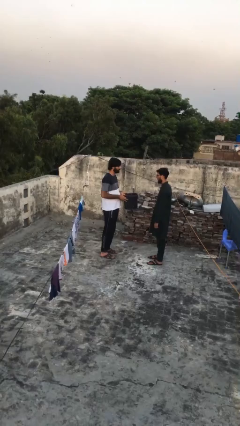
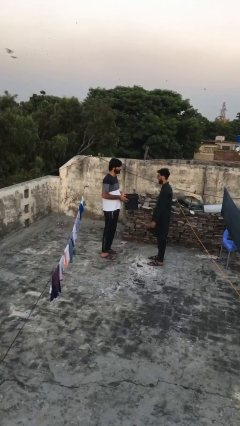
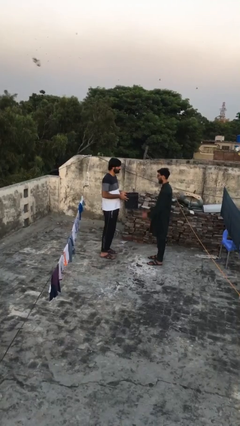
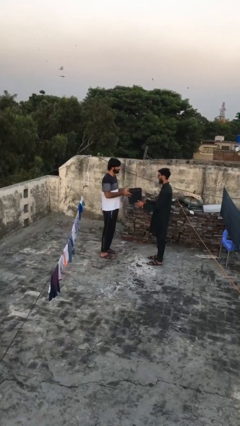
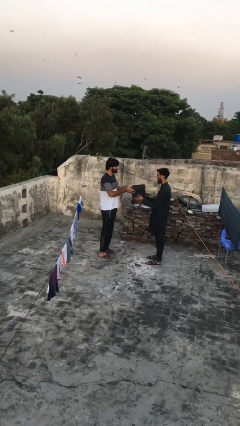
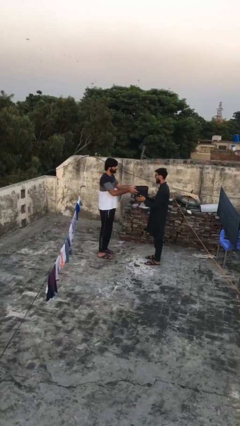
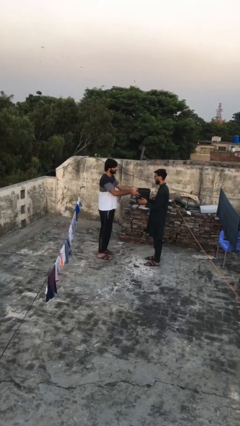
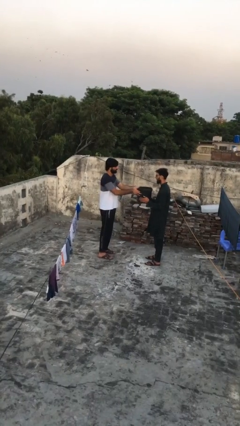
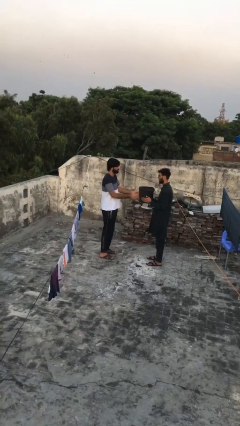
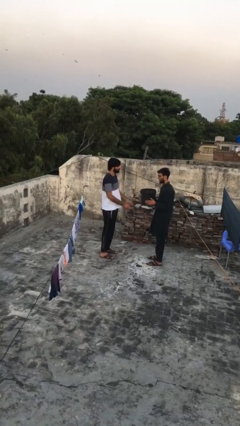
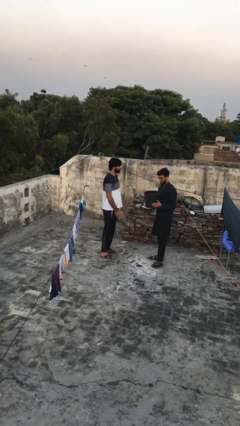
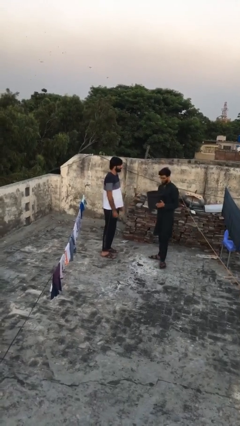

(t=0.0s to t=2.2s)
person transfers object to person

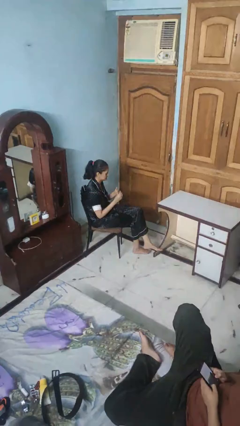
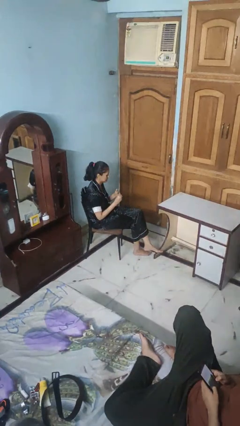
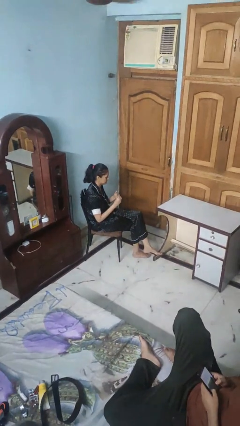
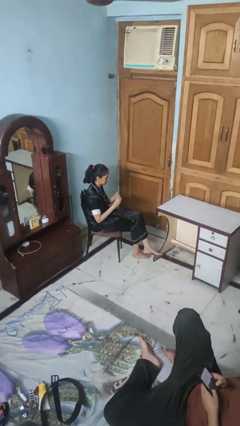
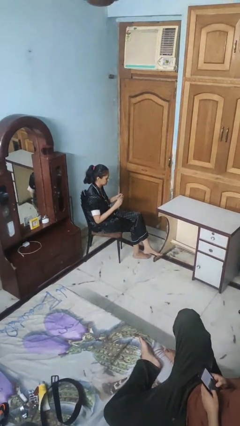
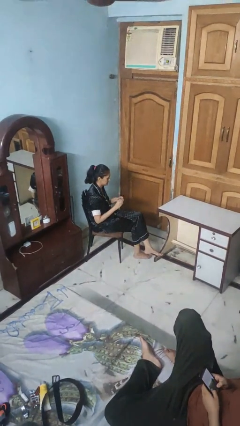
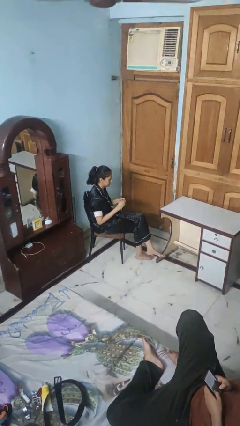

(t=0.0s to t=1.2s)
person takes off ring

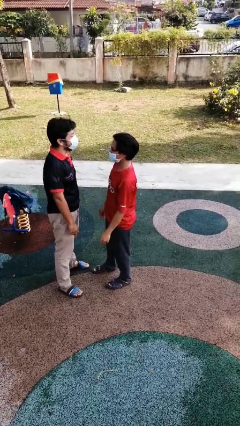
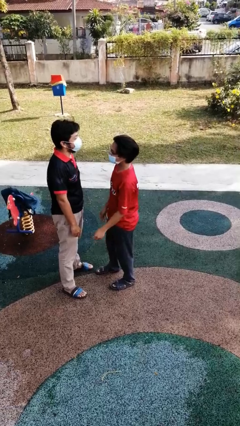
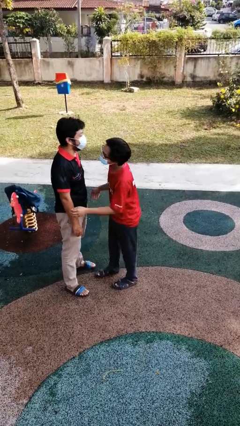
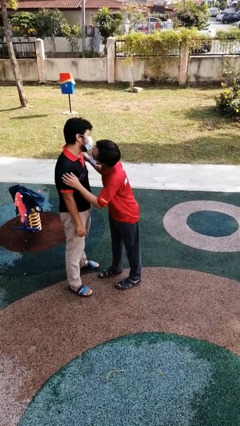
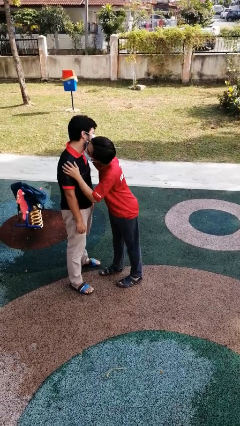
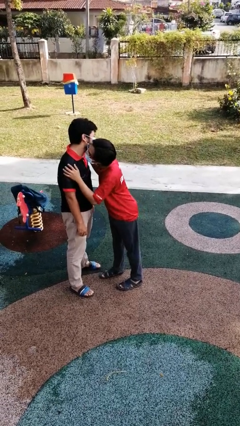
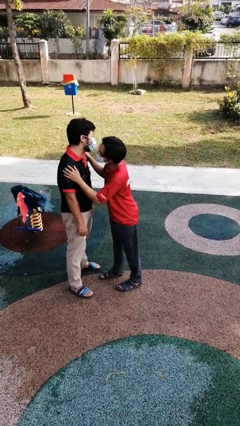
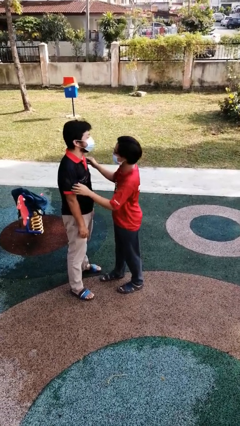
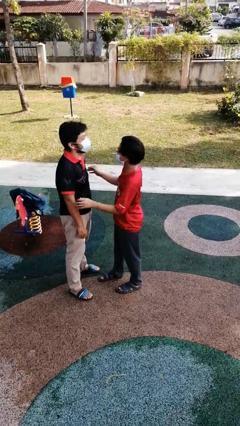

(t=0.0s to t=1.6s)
person kisses cheek of person

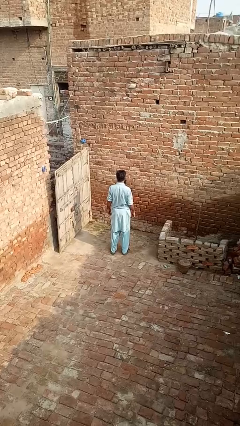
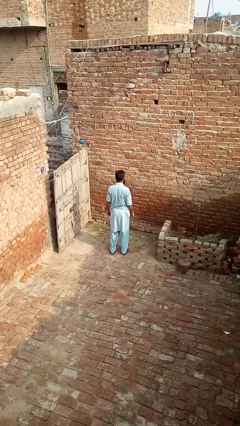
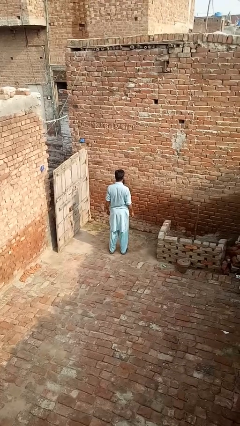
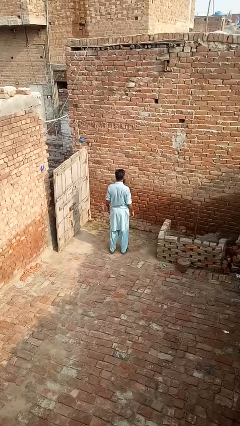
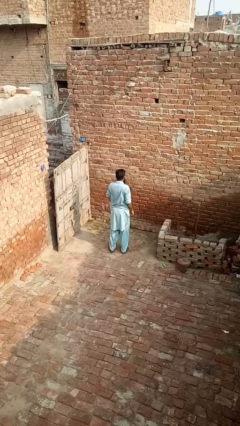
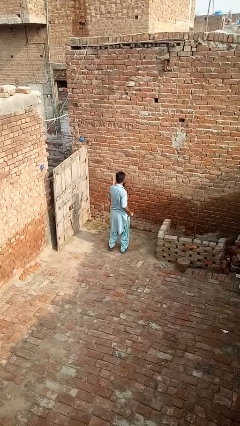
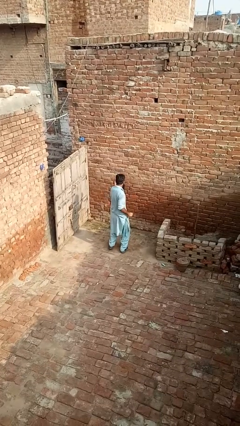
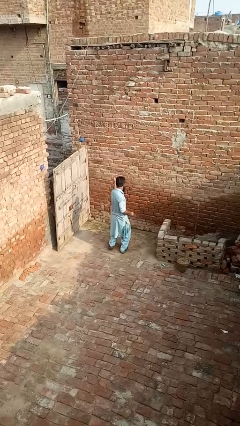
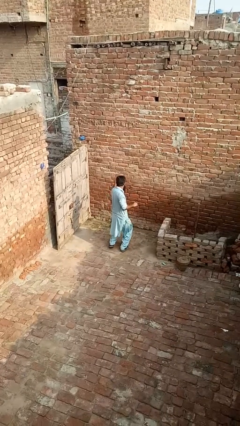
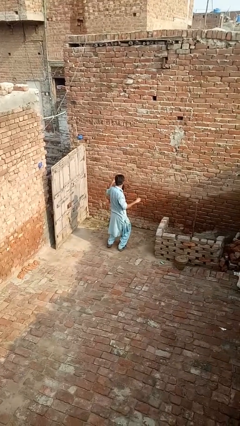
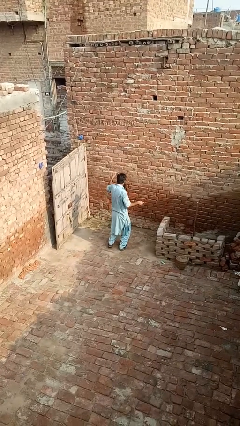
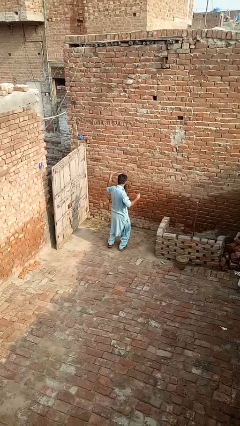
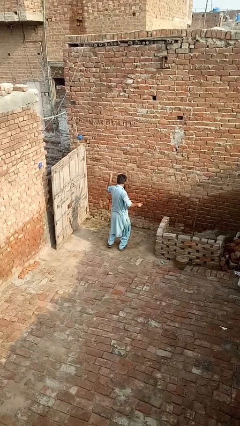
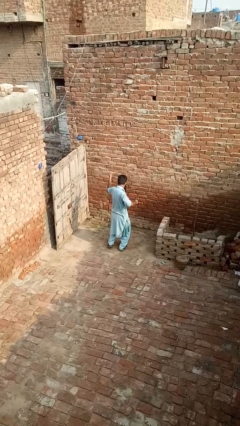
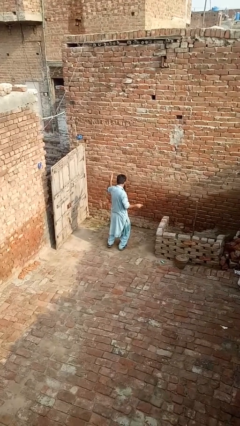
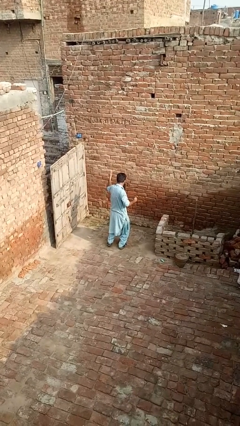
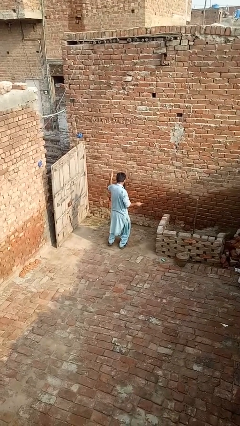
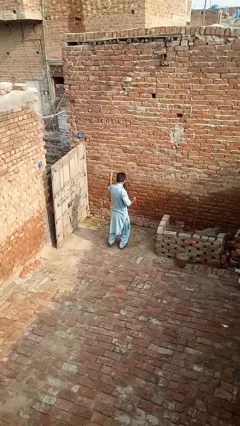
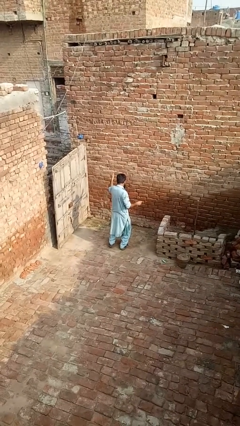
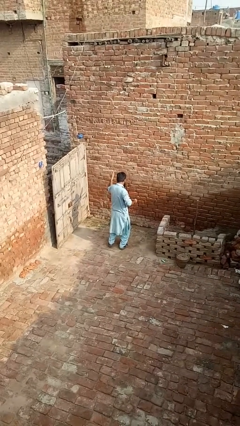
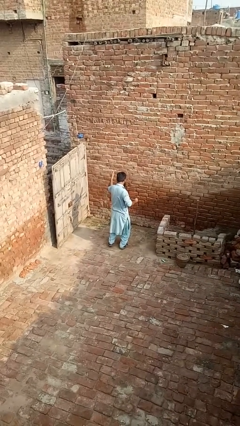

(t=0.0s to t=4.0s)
person dances in place

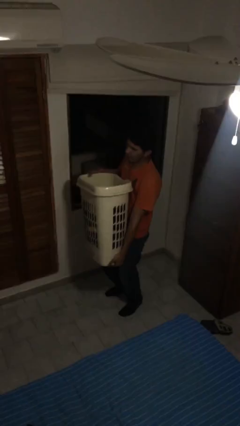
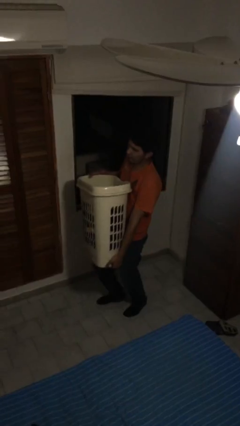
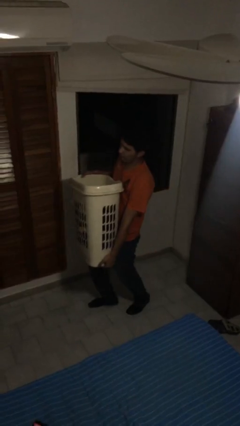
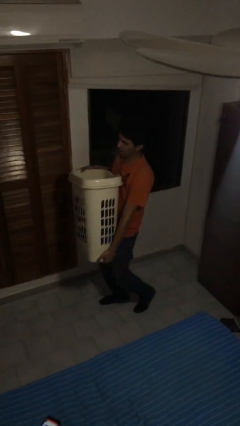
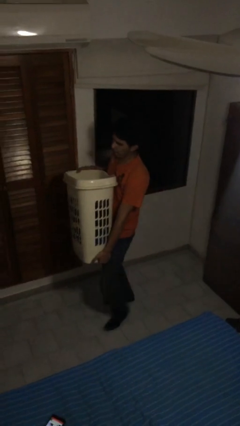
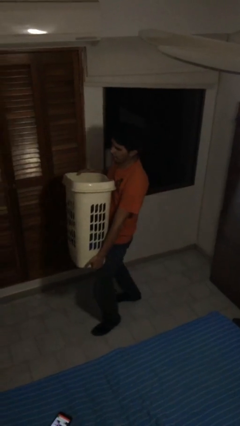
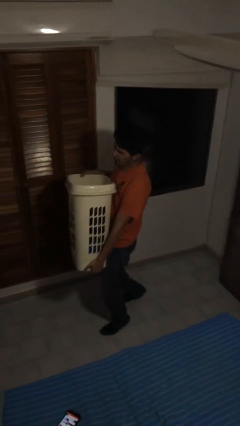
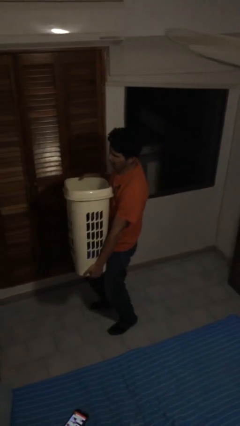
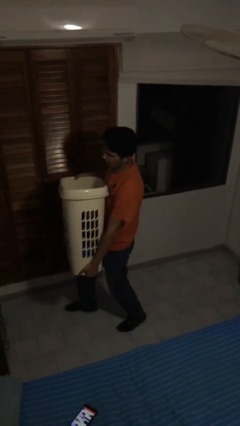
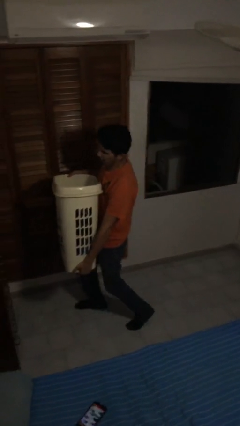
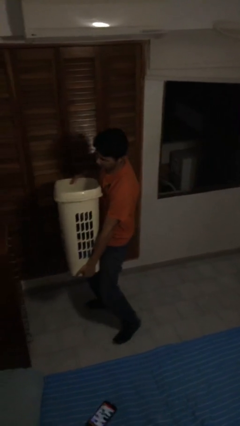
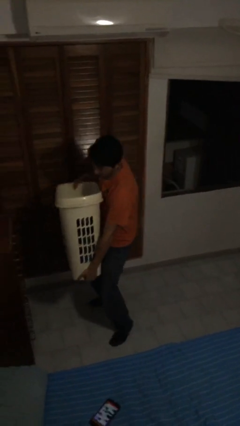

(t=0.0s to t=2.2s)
person carries heavy object

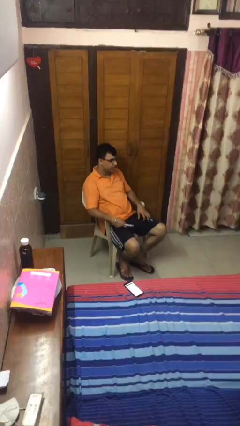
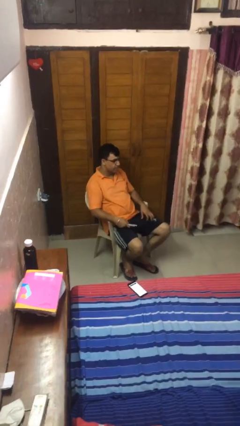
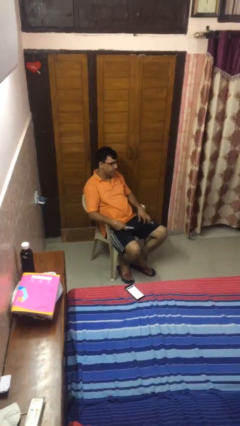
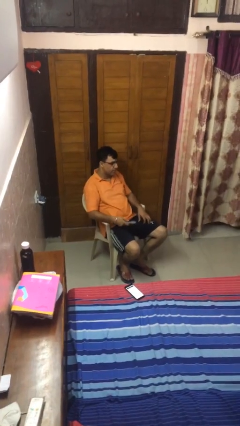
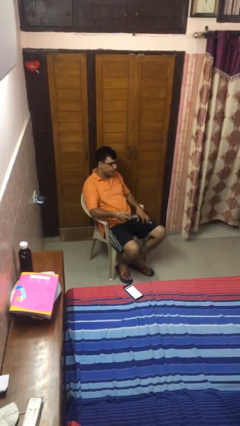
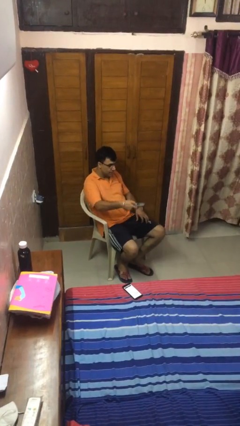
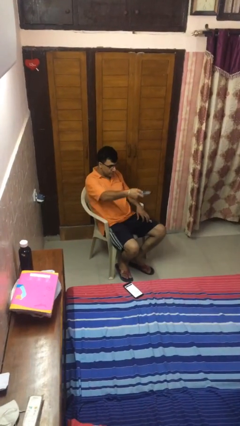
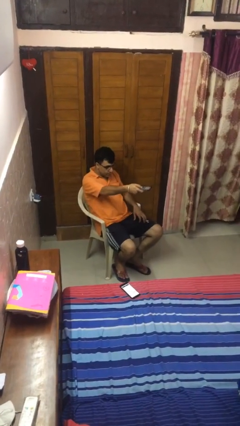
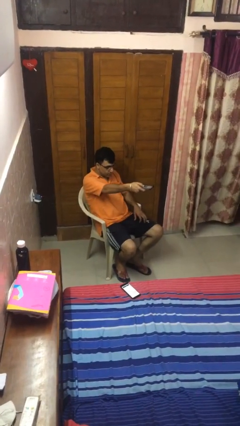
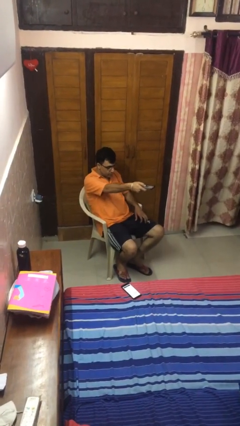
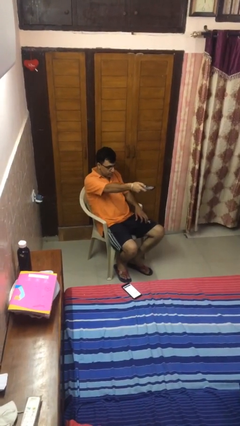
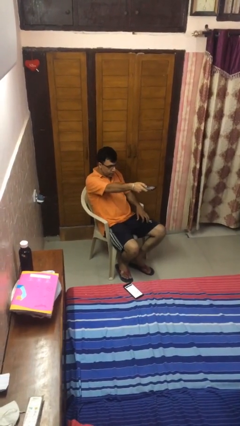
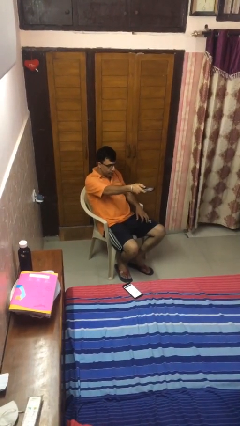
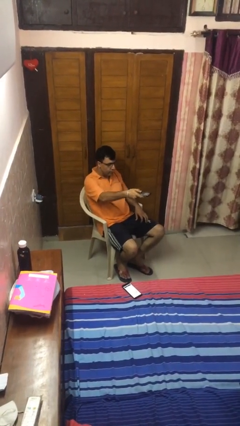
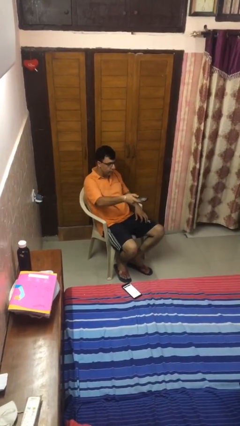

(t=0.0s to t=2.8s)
person uses television remote

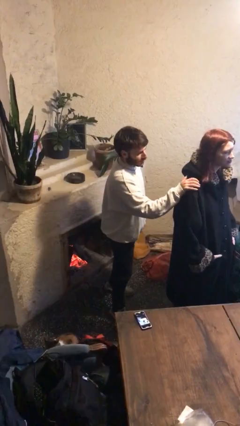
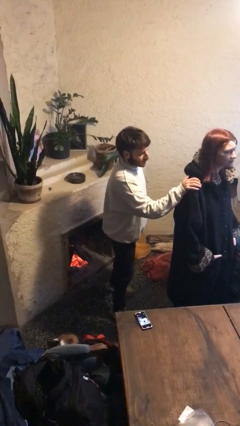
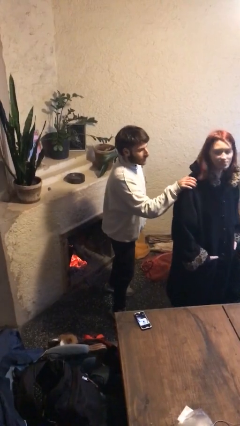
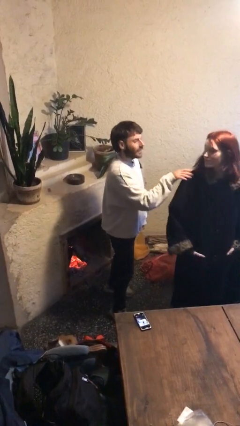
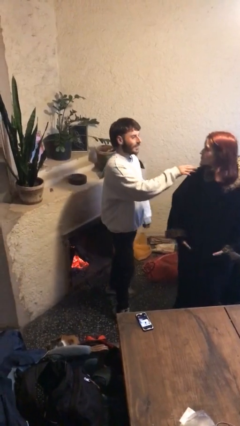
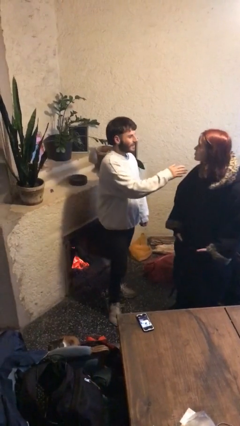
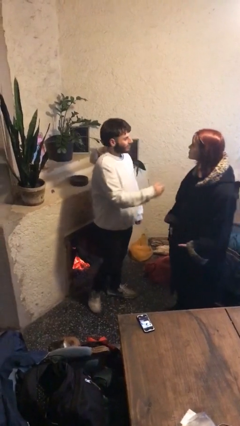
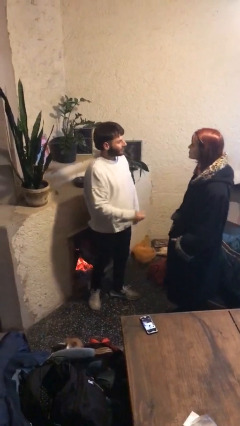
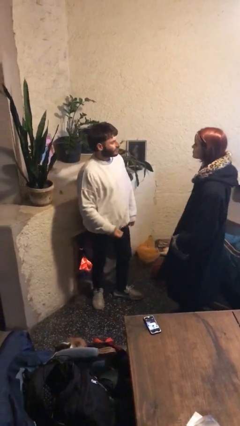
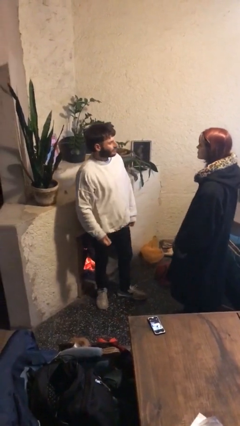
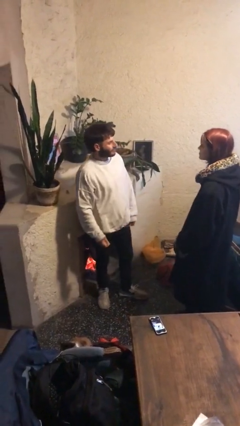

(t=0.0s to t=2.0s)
person spins person around

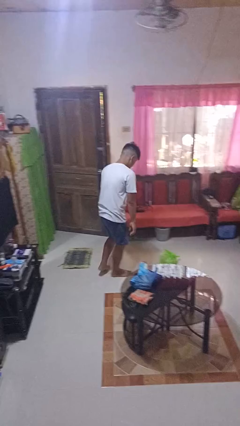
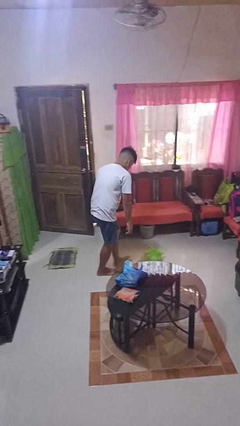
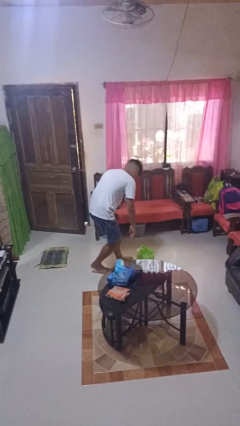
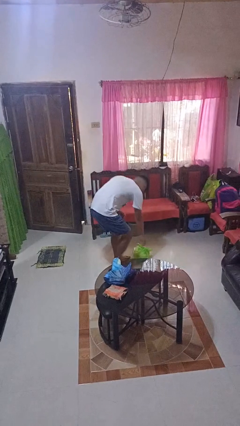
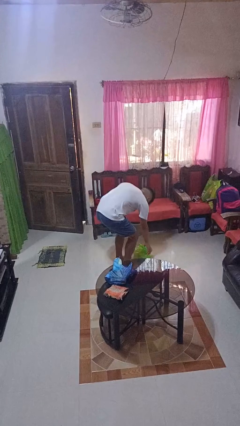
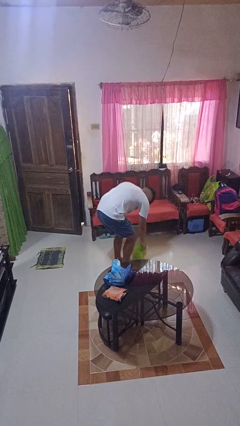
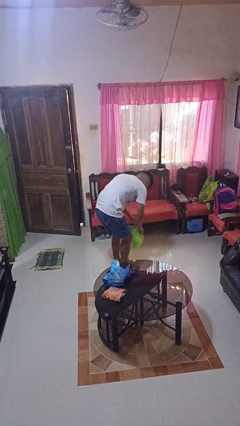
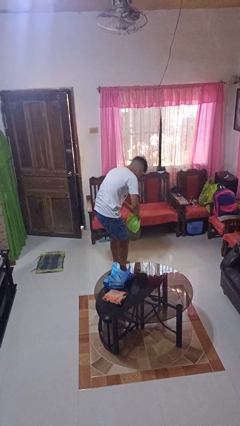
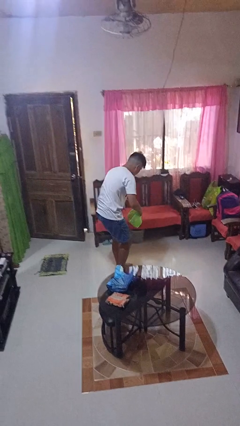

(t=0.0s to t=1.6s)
person picks up object from floor
